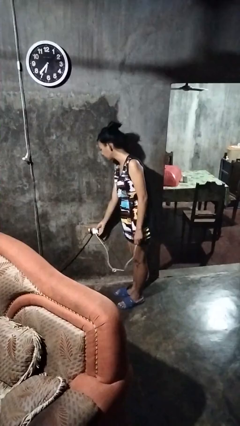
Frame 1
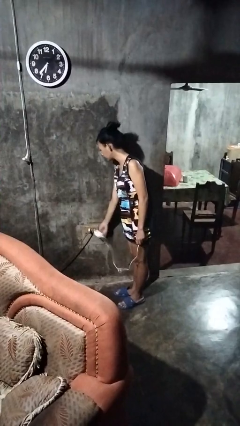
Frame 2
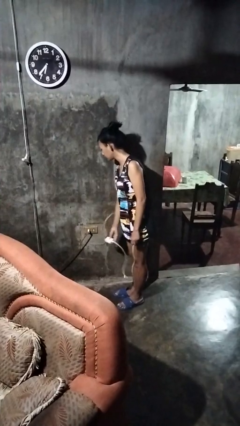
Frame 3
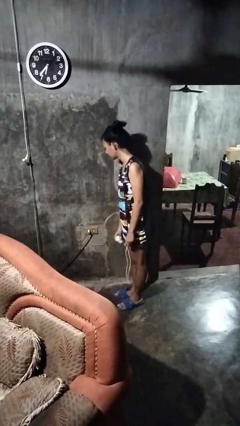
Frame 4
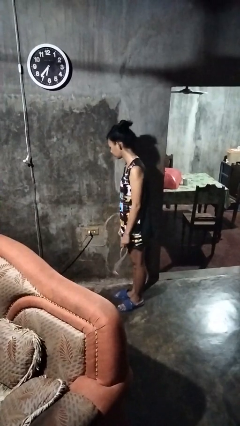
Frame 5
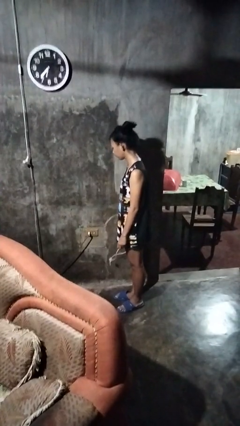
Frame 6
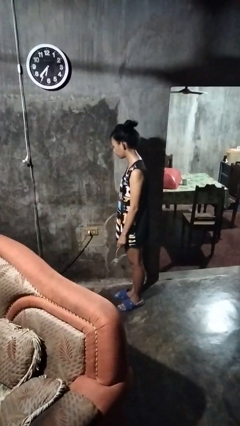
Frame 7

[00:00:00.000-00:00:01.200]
person unplugs from electrical socket

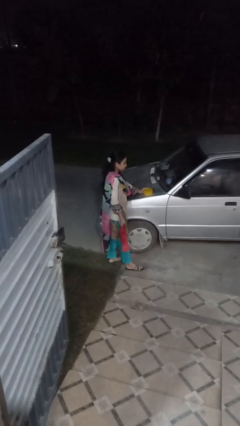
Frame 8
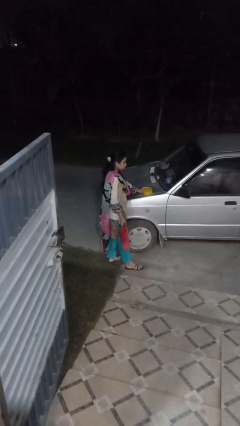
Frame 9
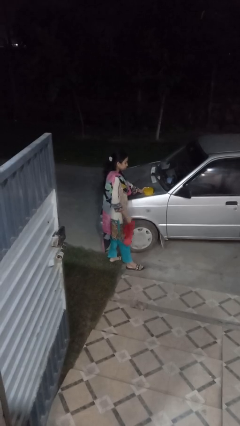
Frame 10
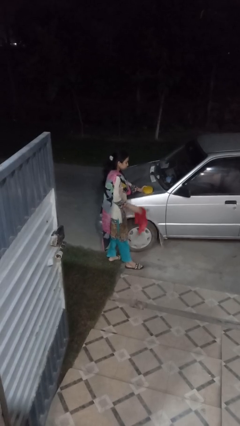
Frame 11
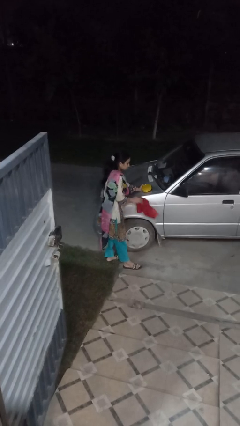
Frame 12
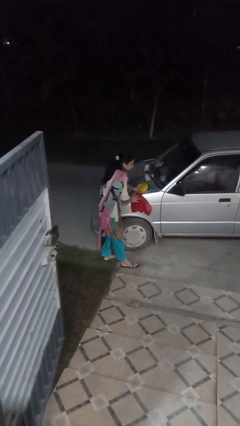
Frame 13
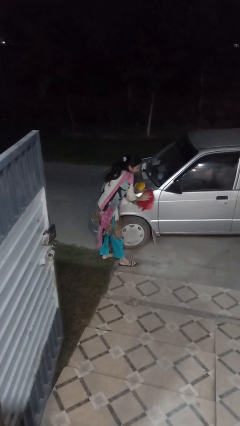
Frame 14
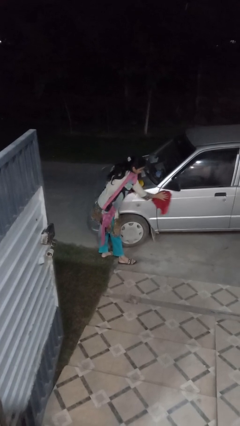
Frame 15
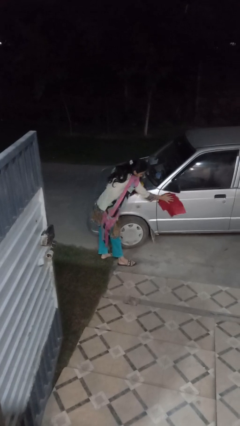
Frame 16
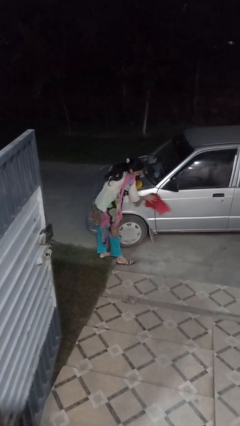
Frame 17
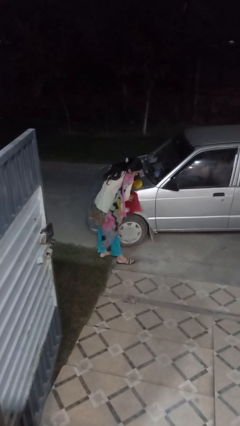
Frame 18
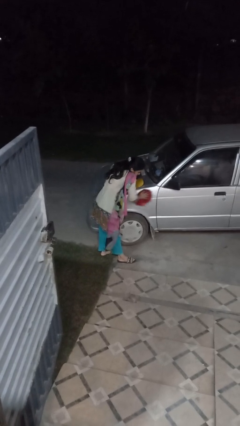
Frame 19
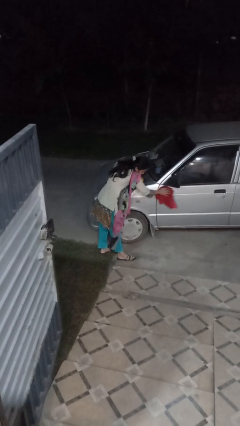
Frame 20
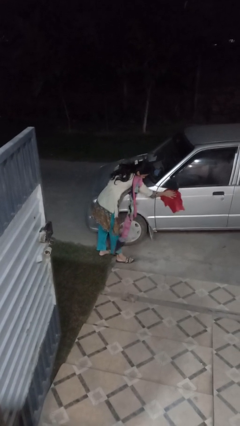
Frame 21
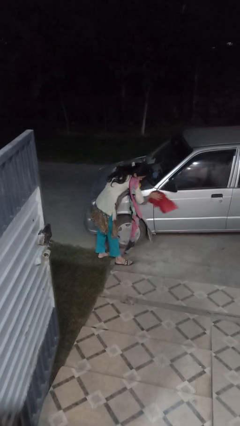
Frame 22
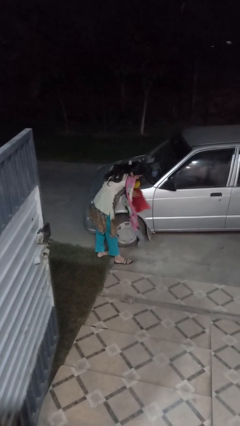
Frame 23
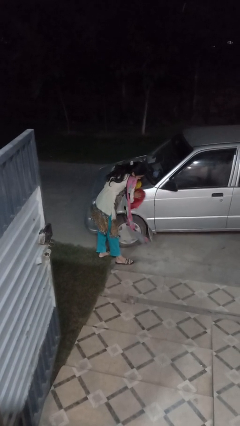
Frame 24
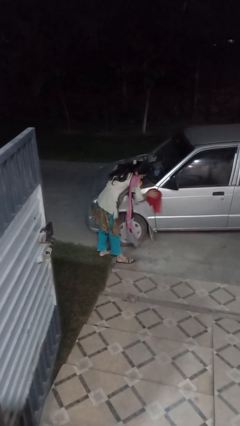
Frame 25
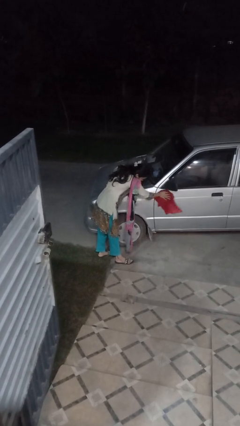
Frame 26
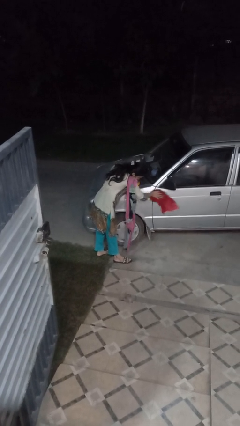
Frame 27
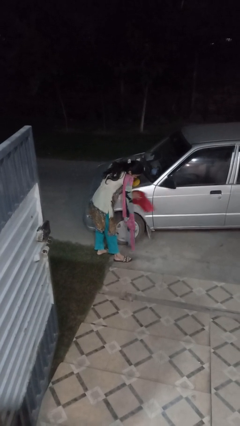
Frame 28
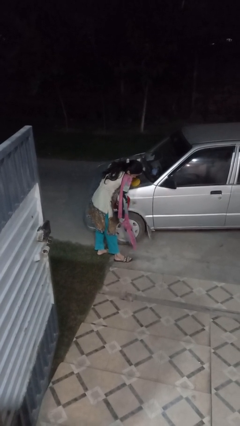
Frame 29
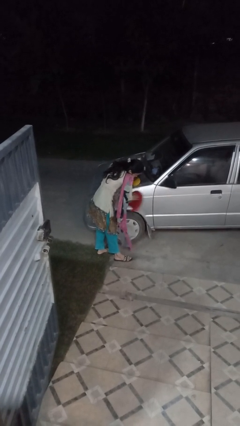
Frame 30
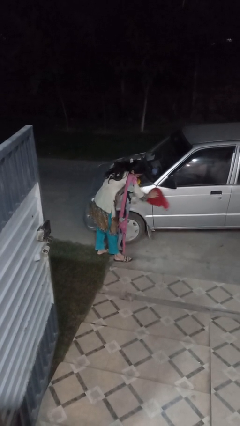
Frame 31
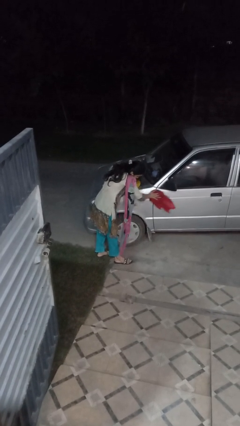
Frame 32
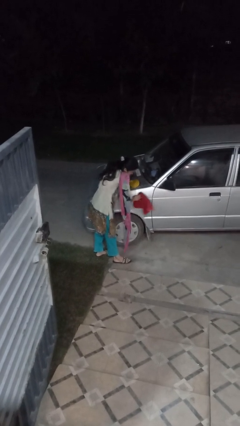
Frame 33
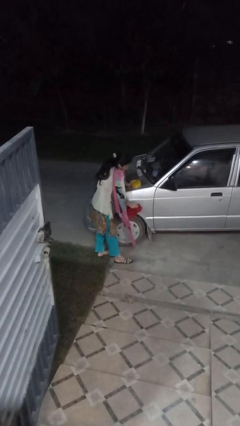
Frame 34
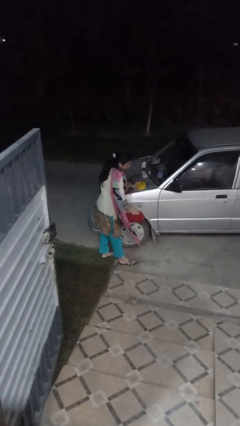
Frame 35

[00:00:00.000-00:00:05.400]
person polishes car with rag

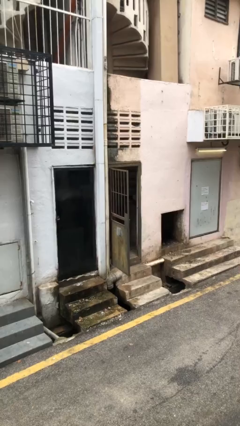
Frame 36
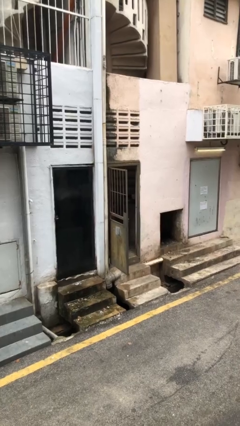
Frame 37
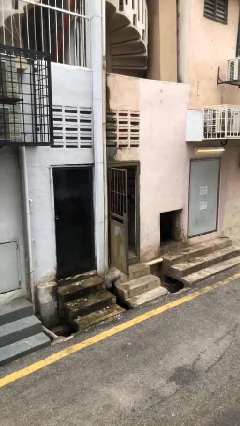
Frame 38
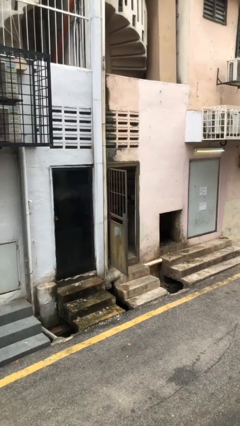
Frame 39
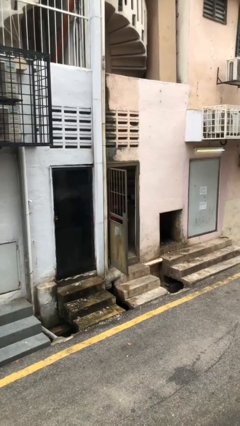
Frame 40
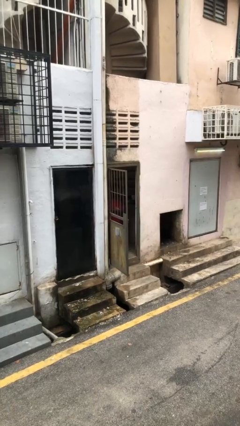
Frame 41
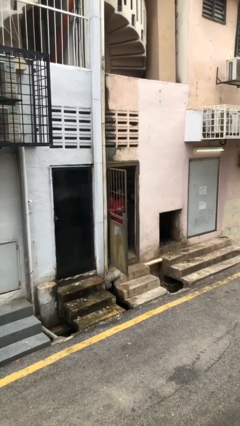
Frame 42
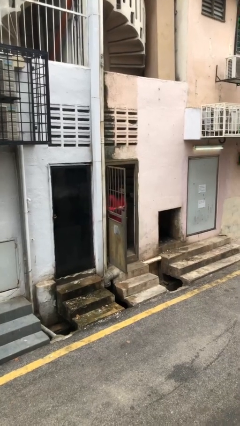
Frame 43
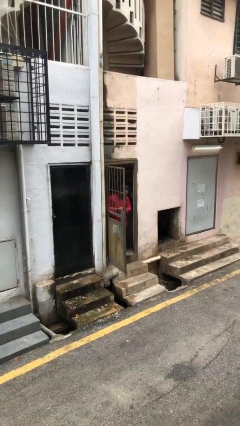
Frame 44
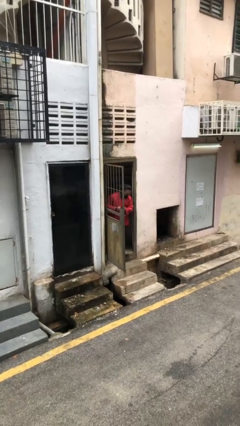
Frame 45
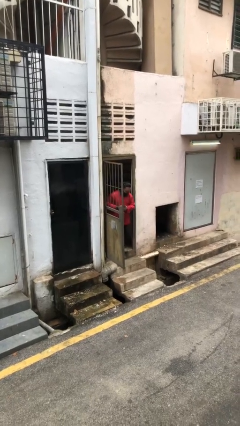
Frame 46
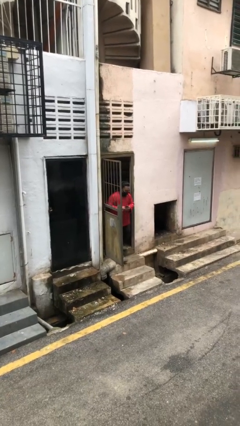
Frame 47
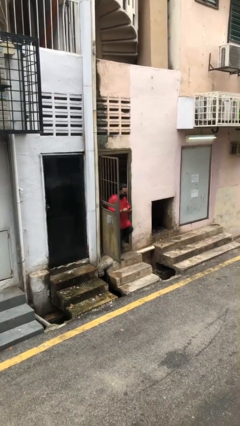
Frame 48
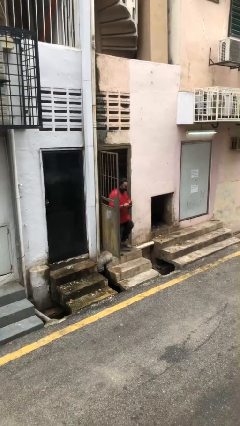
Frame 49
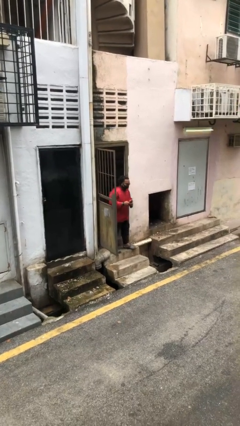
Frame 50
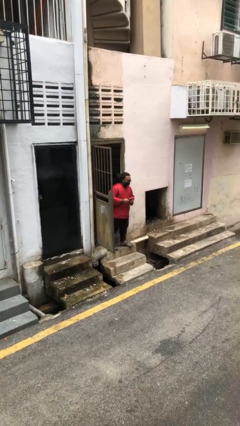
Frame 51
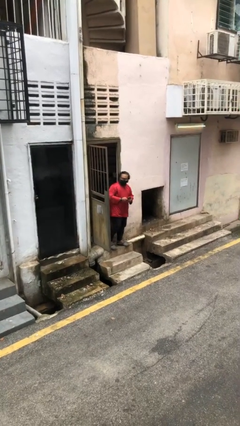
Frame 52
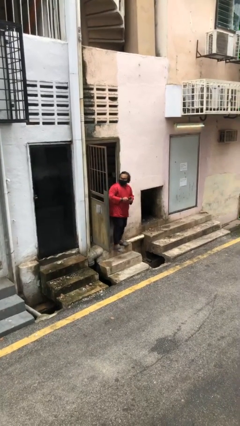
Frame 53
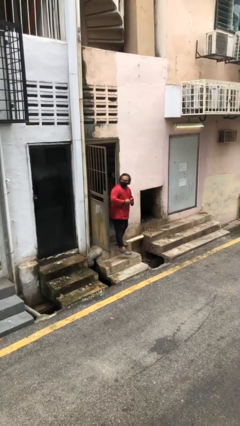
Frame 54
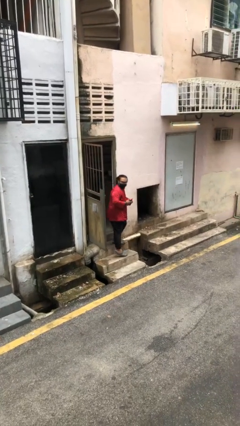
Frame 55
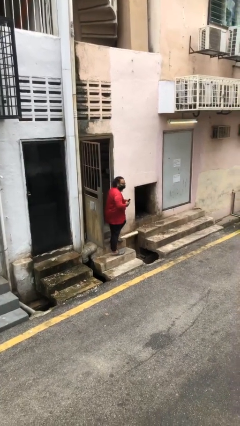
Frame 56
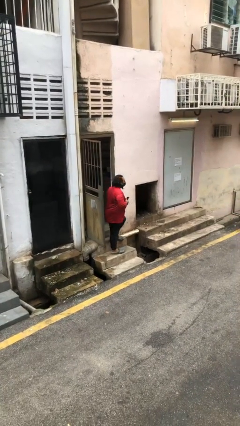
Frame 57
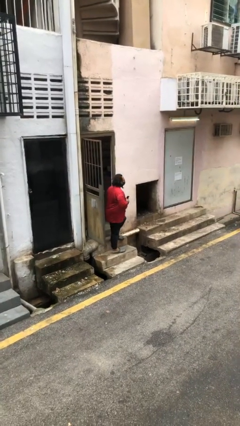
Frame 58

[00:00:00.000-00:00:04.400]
person enters scene through structure

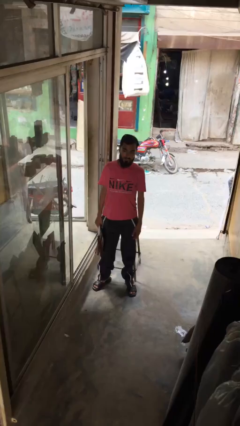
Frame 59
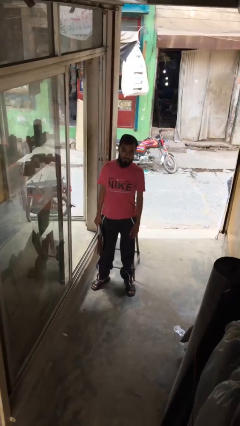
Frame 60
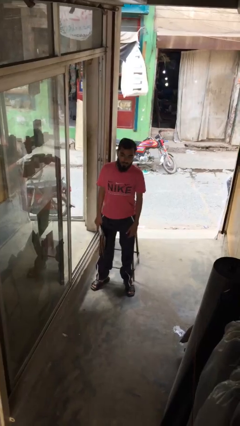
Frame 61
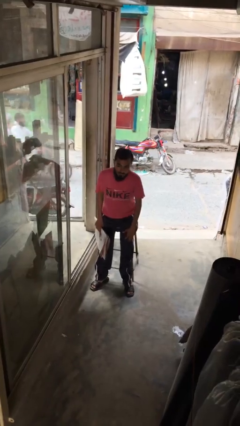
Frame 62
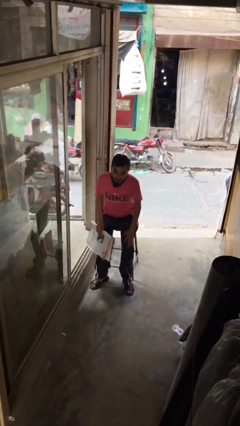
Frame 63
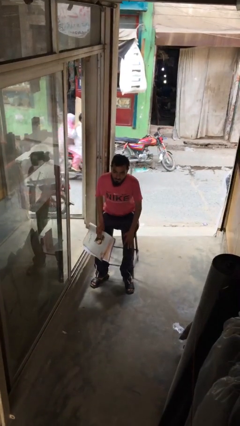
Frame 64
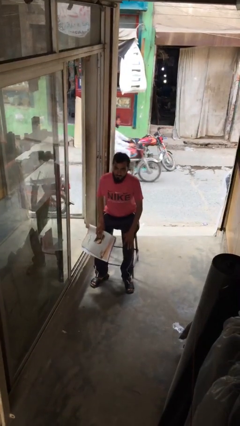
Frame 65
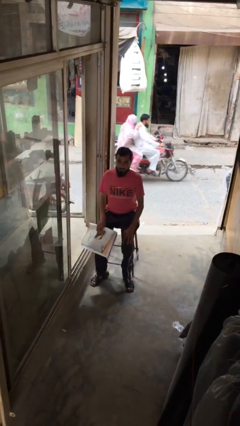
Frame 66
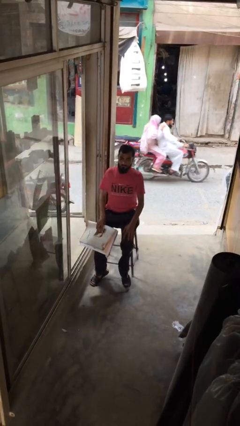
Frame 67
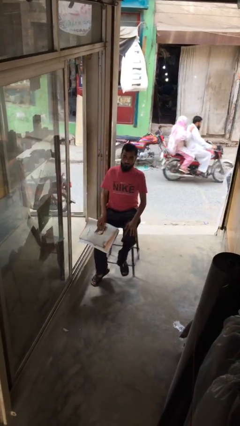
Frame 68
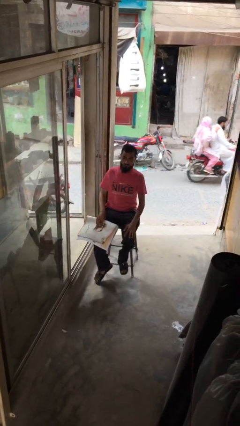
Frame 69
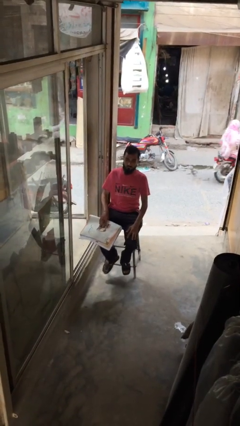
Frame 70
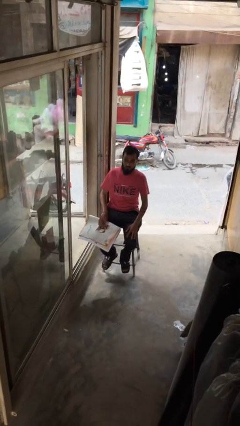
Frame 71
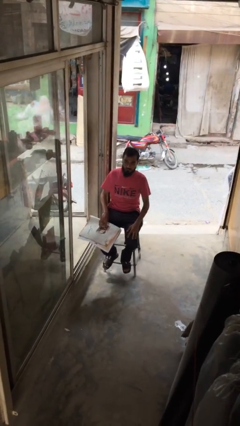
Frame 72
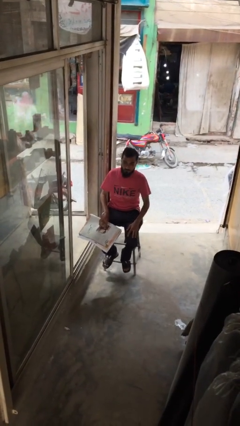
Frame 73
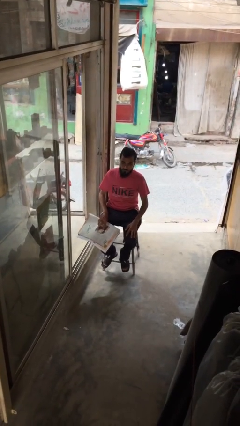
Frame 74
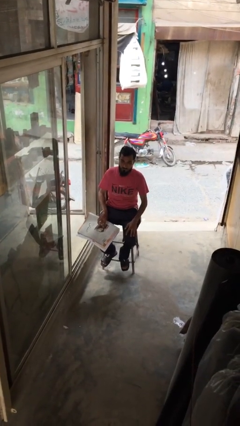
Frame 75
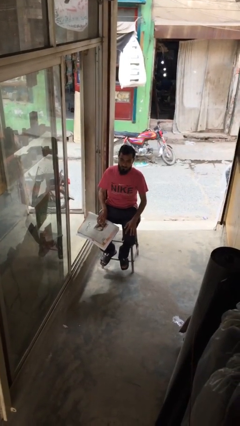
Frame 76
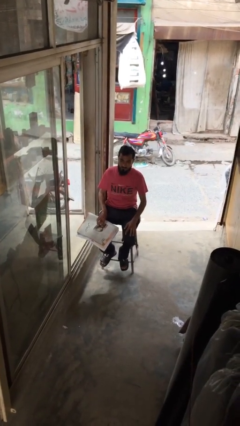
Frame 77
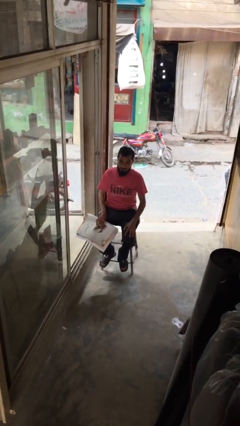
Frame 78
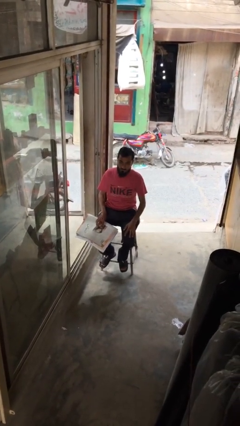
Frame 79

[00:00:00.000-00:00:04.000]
person sits down

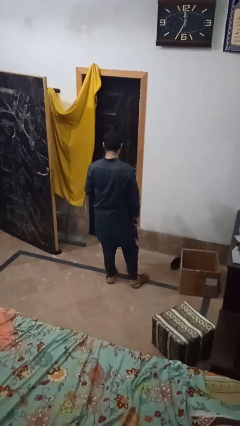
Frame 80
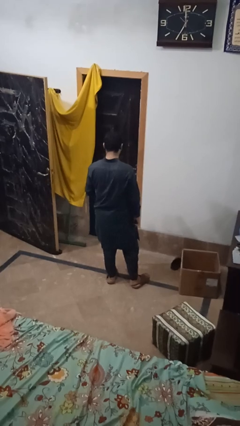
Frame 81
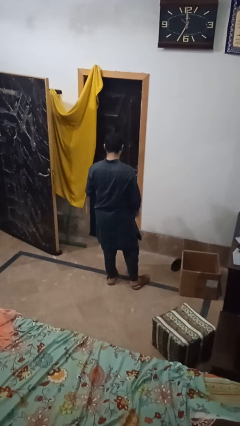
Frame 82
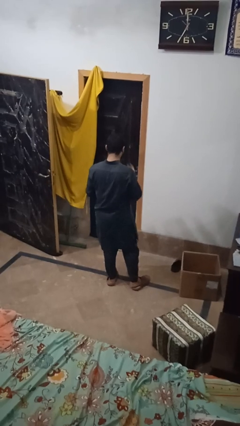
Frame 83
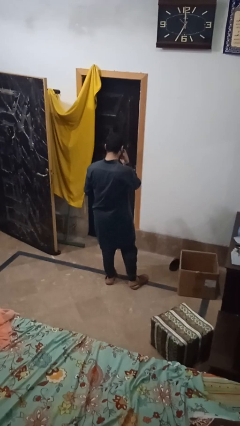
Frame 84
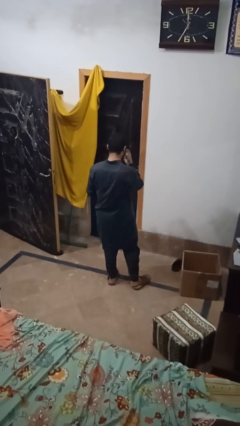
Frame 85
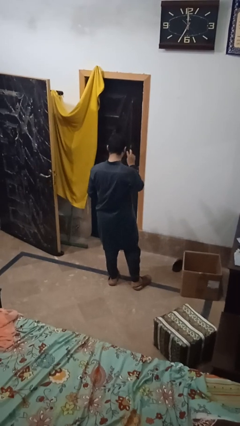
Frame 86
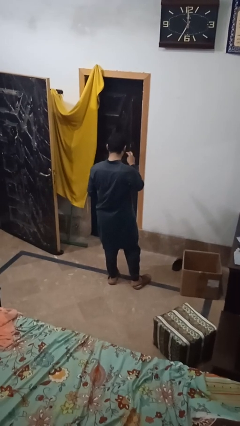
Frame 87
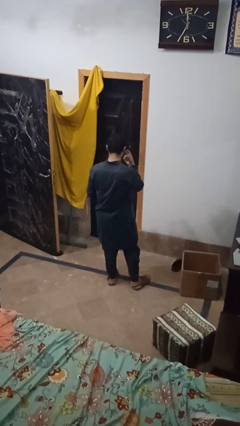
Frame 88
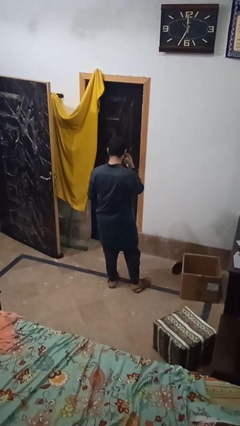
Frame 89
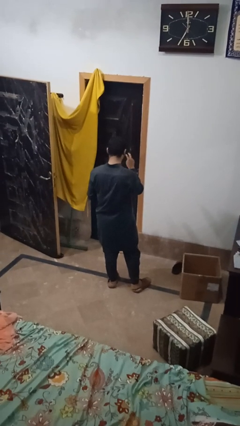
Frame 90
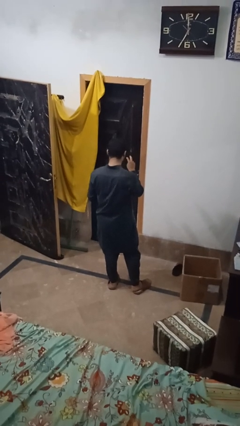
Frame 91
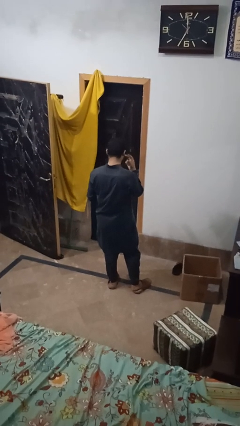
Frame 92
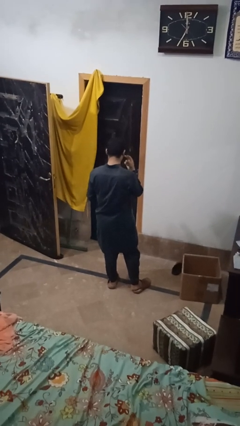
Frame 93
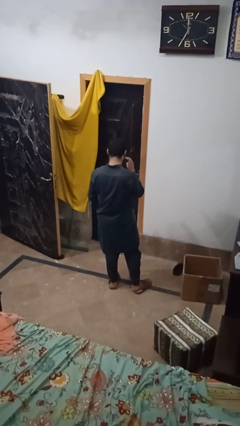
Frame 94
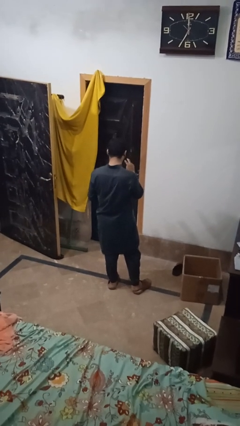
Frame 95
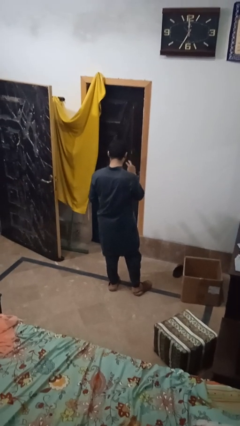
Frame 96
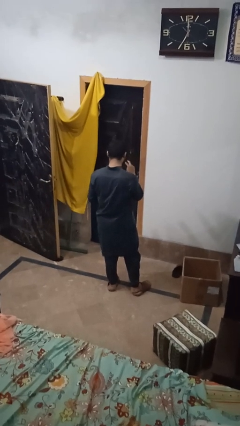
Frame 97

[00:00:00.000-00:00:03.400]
person gestures watch closely
